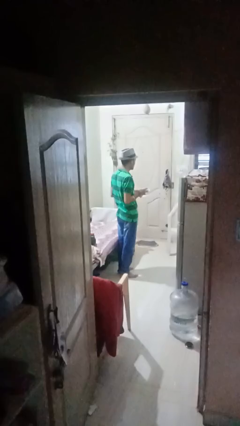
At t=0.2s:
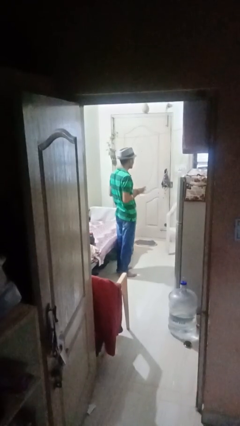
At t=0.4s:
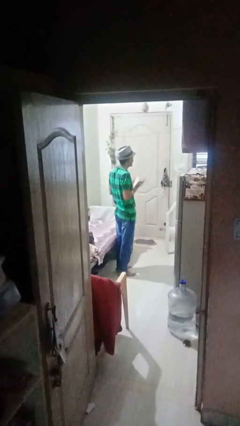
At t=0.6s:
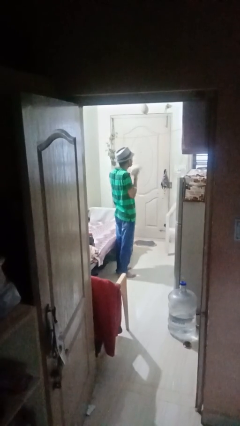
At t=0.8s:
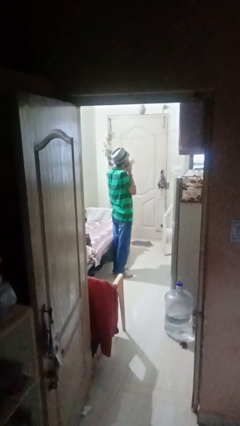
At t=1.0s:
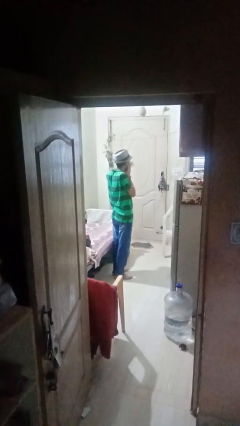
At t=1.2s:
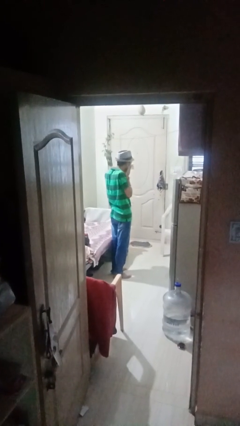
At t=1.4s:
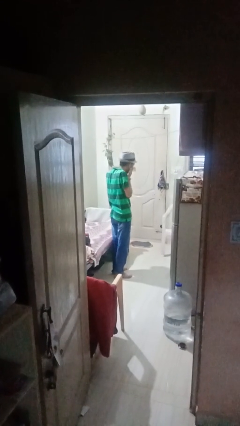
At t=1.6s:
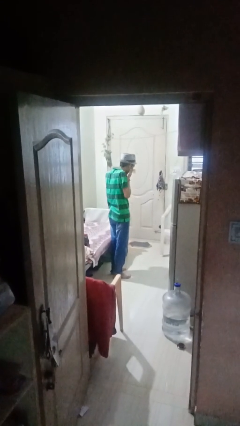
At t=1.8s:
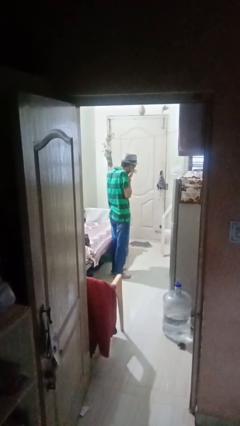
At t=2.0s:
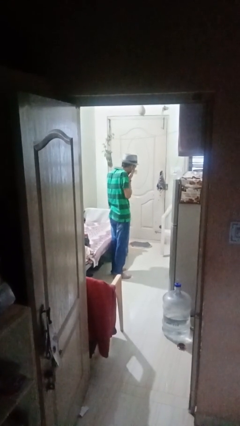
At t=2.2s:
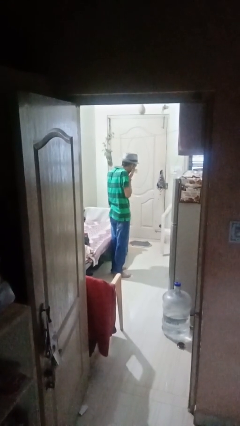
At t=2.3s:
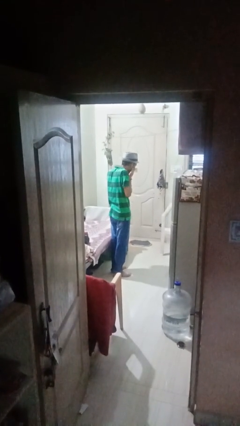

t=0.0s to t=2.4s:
person blows nose

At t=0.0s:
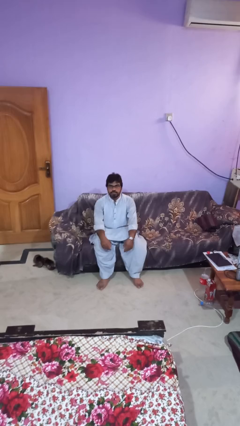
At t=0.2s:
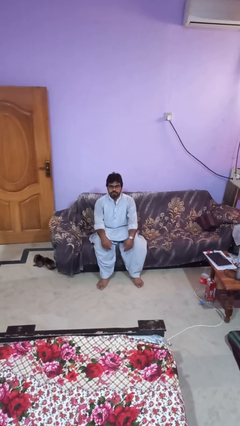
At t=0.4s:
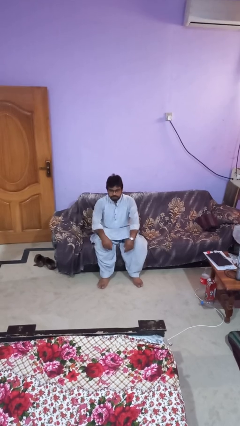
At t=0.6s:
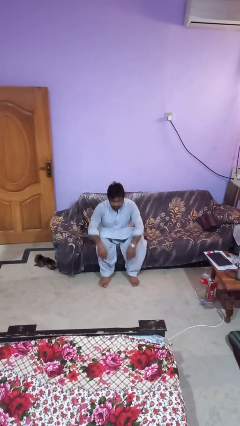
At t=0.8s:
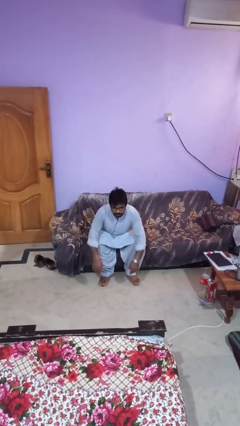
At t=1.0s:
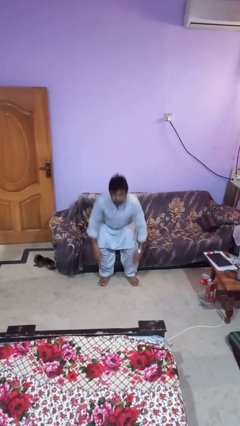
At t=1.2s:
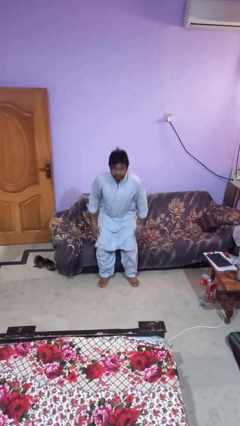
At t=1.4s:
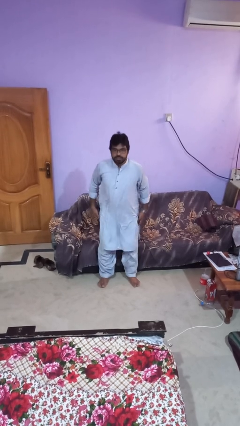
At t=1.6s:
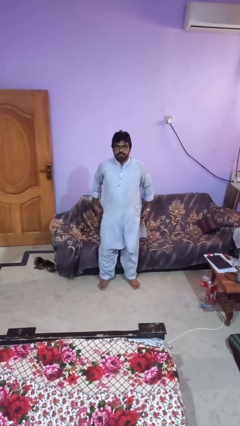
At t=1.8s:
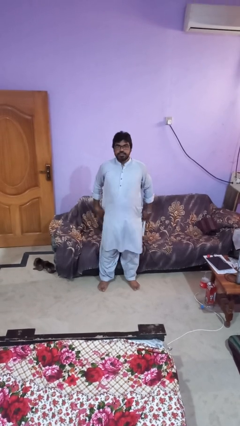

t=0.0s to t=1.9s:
person stands up

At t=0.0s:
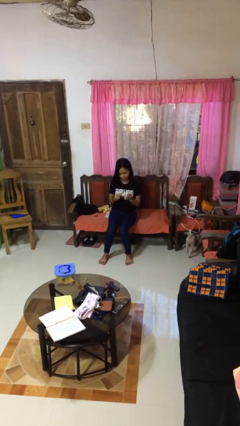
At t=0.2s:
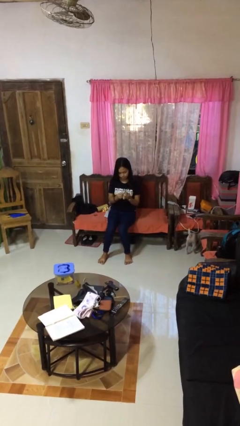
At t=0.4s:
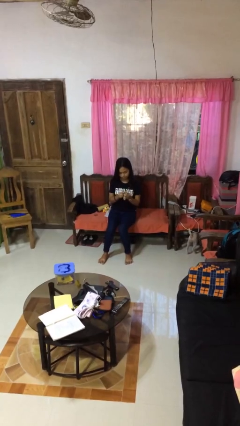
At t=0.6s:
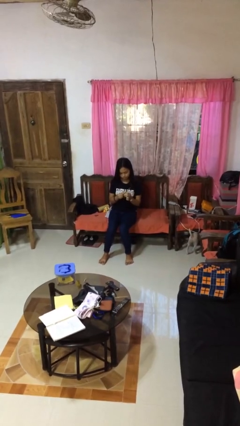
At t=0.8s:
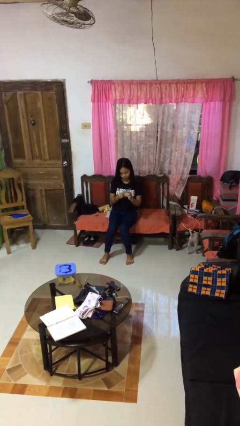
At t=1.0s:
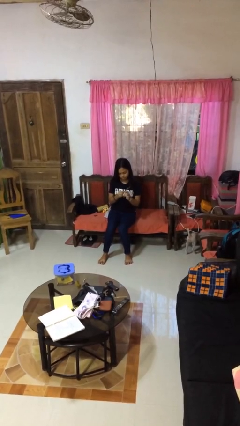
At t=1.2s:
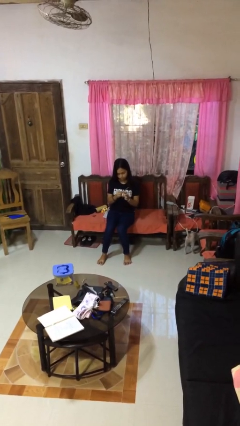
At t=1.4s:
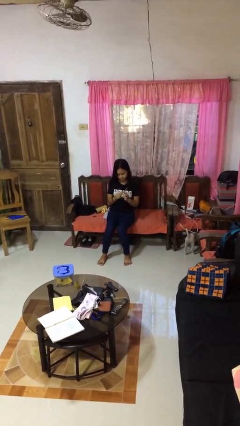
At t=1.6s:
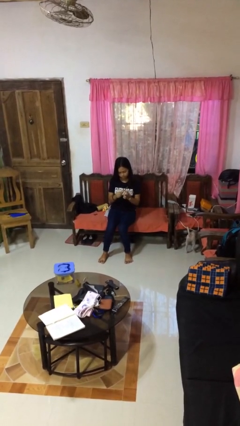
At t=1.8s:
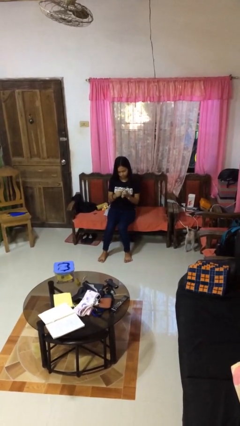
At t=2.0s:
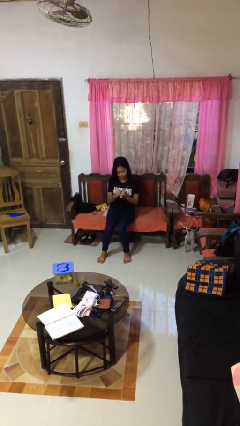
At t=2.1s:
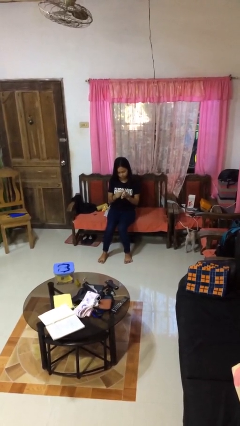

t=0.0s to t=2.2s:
person files fingernails

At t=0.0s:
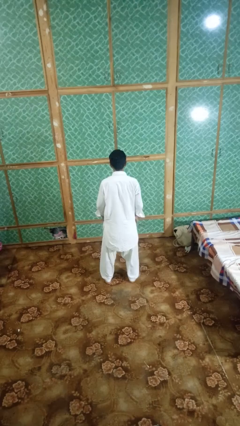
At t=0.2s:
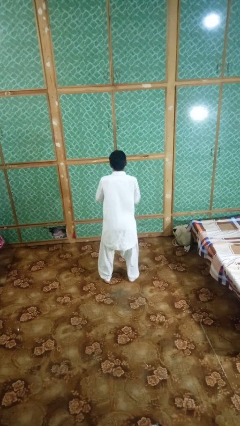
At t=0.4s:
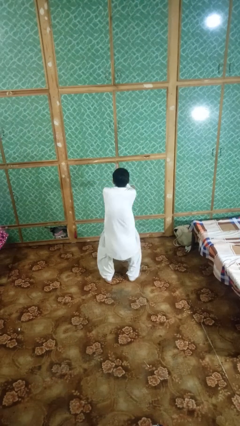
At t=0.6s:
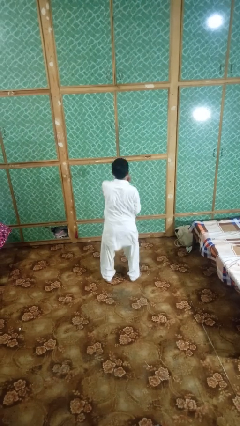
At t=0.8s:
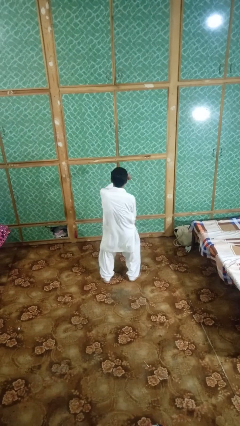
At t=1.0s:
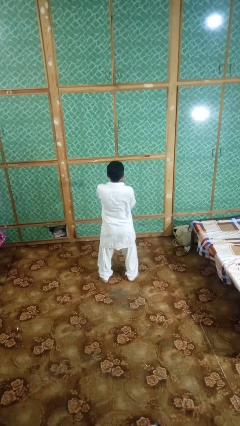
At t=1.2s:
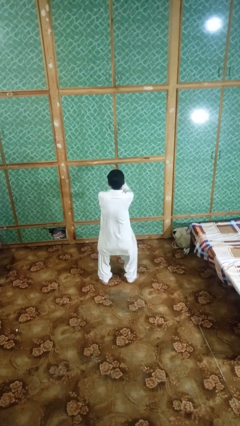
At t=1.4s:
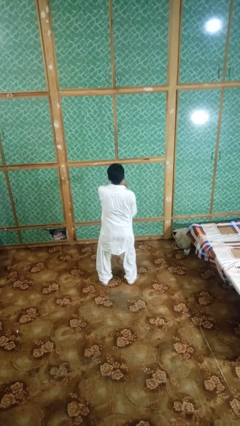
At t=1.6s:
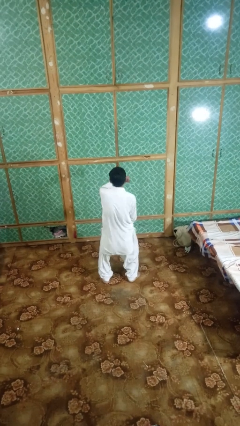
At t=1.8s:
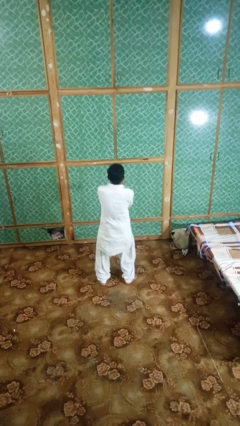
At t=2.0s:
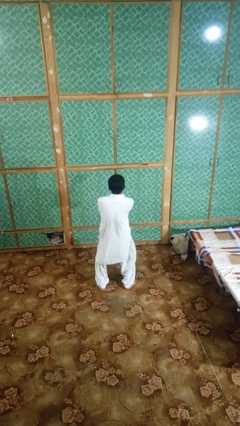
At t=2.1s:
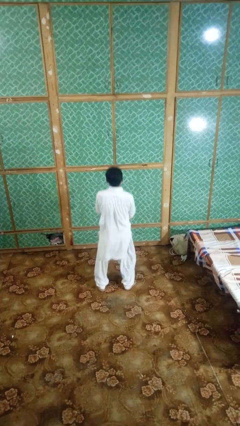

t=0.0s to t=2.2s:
person dances in place

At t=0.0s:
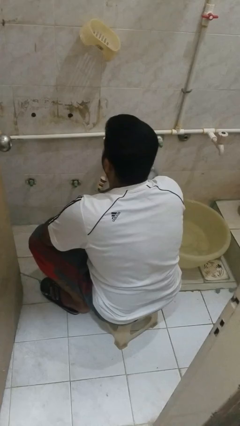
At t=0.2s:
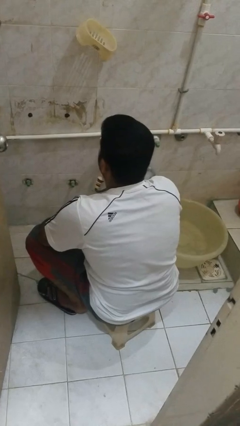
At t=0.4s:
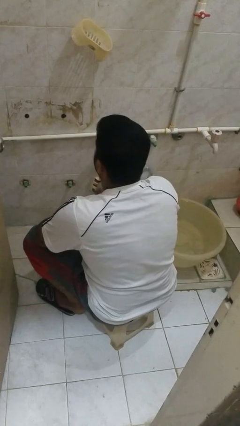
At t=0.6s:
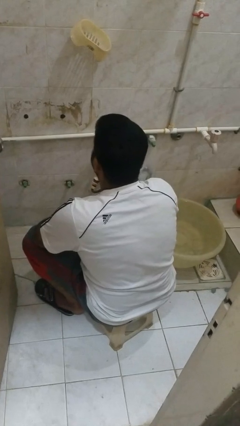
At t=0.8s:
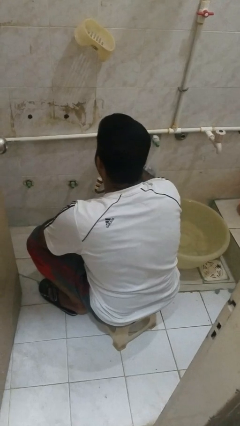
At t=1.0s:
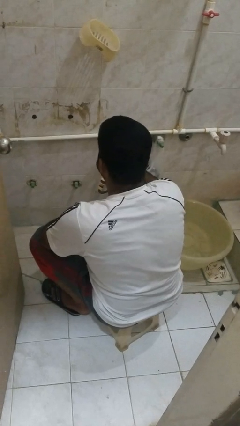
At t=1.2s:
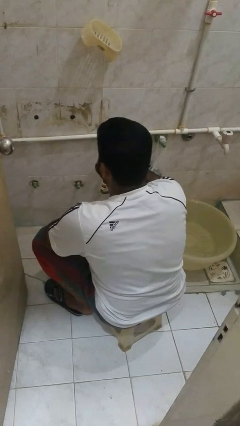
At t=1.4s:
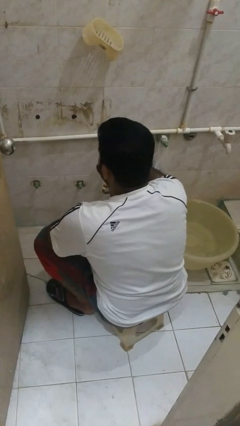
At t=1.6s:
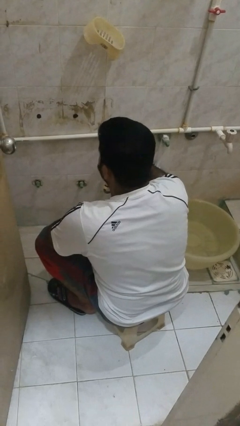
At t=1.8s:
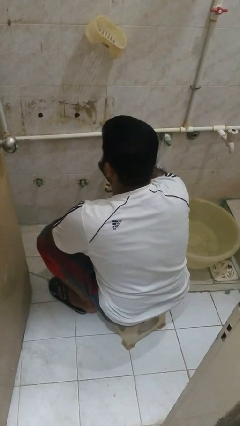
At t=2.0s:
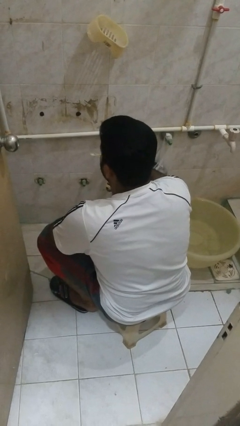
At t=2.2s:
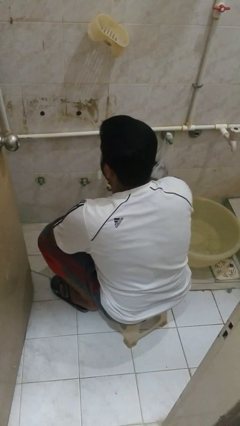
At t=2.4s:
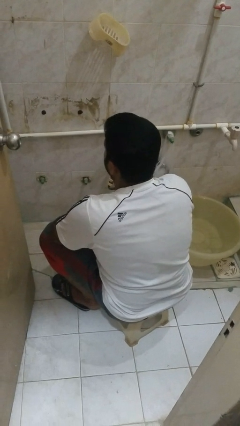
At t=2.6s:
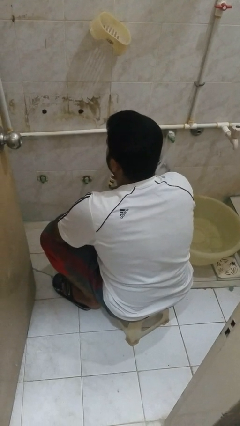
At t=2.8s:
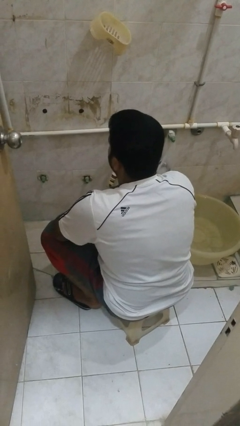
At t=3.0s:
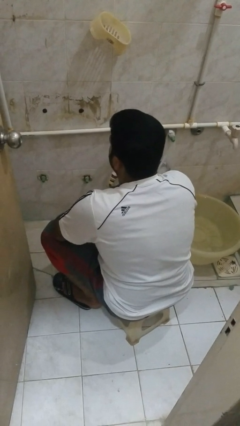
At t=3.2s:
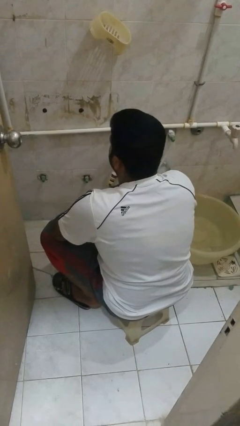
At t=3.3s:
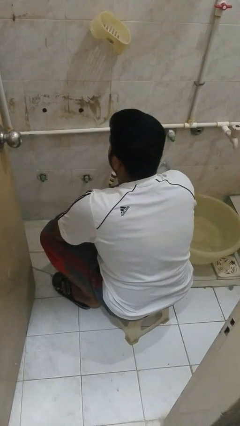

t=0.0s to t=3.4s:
person brushes teeth

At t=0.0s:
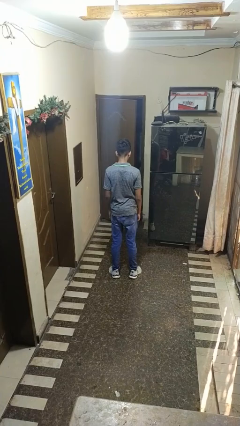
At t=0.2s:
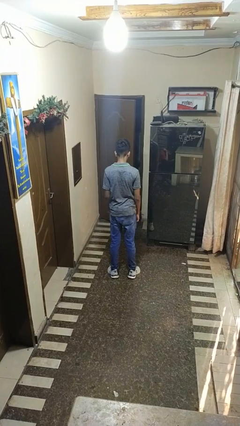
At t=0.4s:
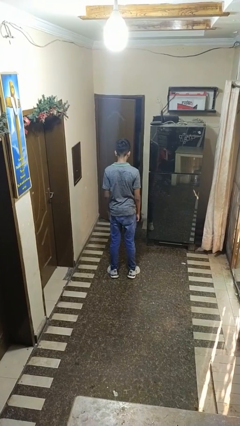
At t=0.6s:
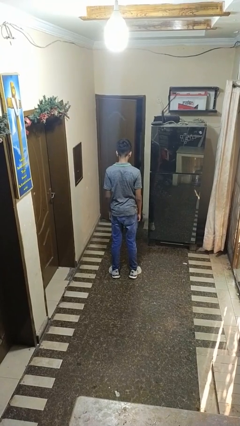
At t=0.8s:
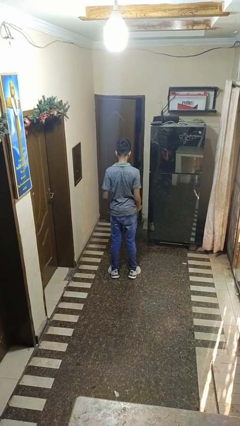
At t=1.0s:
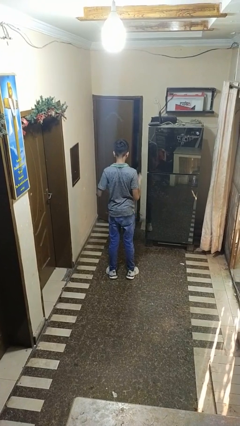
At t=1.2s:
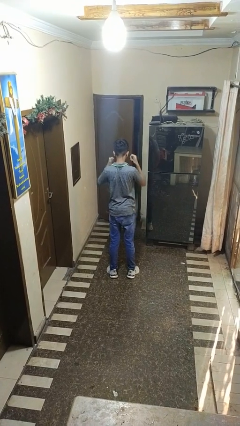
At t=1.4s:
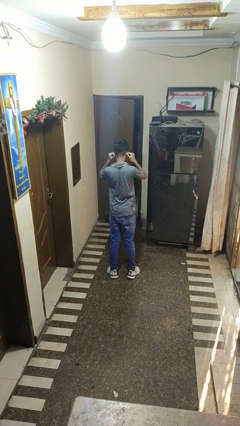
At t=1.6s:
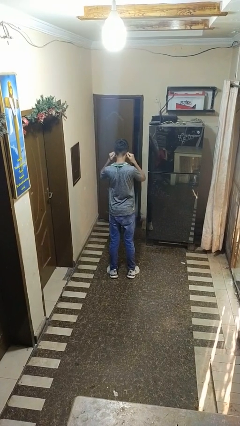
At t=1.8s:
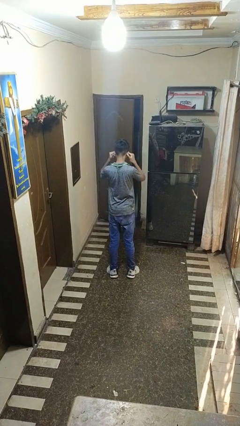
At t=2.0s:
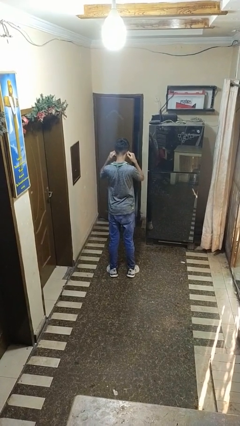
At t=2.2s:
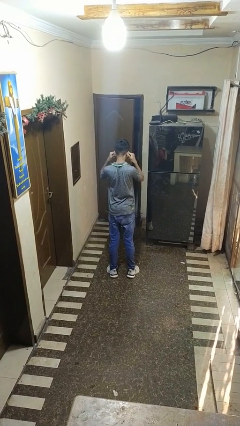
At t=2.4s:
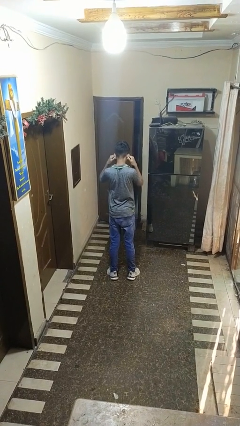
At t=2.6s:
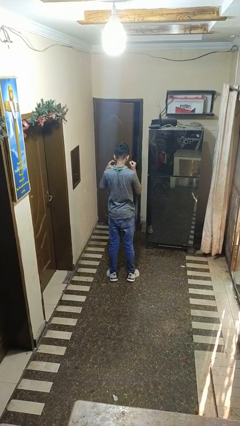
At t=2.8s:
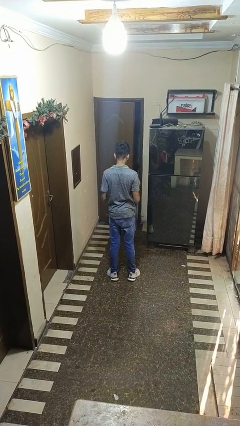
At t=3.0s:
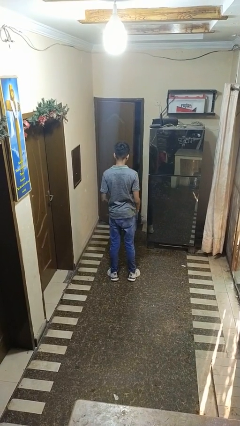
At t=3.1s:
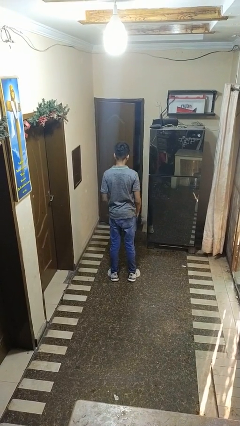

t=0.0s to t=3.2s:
person touches earlobe

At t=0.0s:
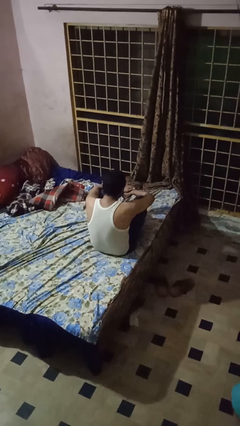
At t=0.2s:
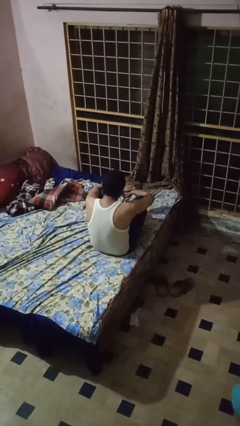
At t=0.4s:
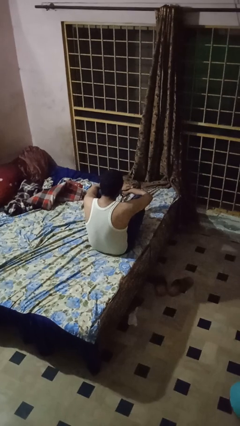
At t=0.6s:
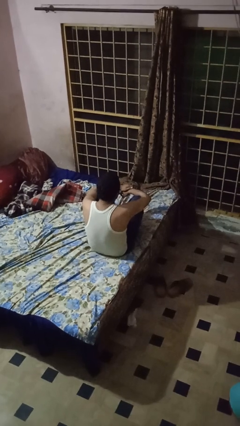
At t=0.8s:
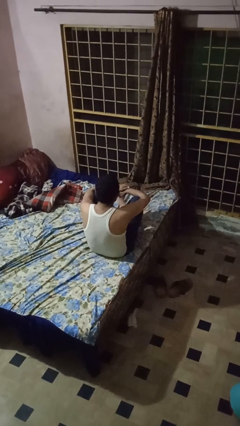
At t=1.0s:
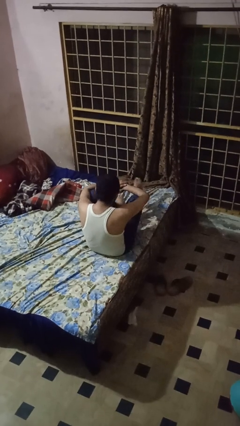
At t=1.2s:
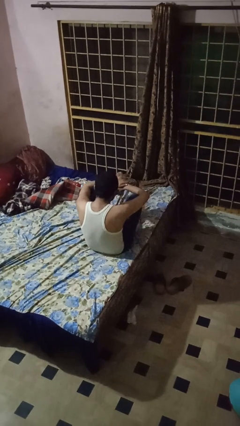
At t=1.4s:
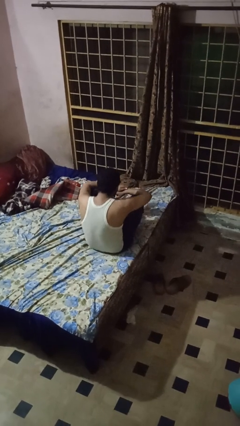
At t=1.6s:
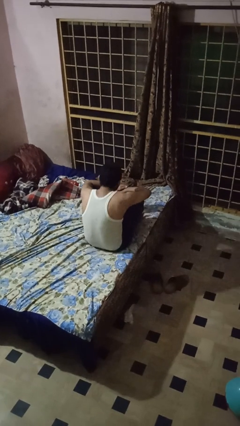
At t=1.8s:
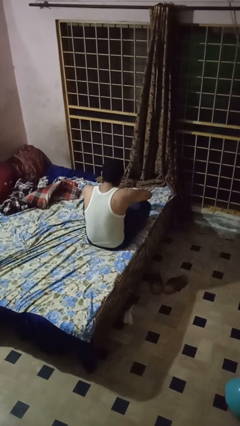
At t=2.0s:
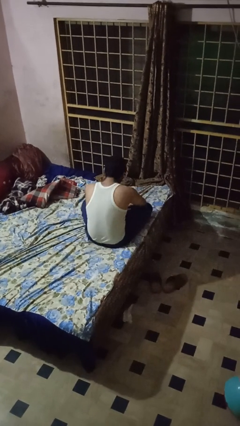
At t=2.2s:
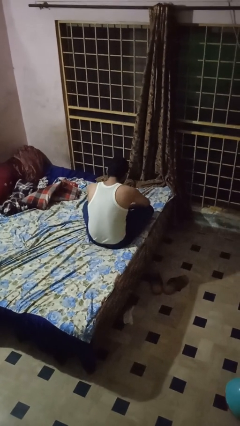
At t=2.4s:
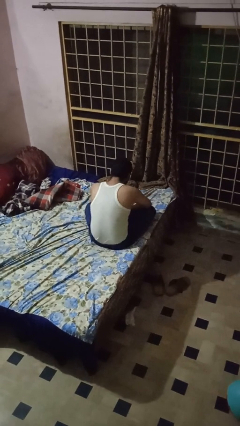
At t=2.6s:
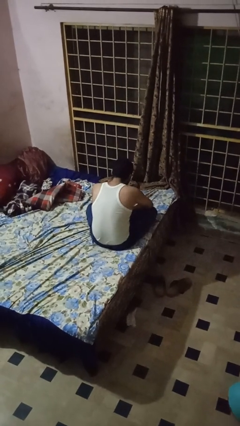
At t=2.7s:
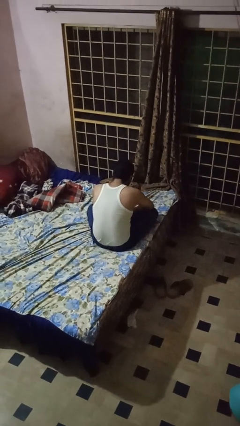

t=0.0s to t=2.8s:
person crosses legs
